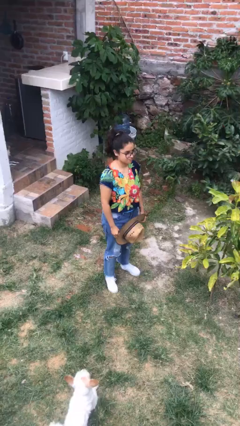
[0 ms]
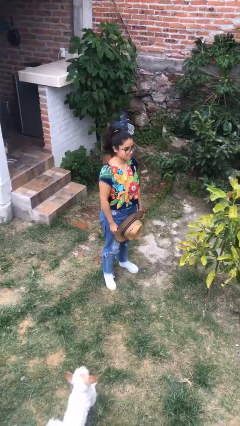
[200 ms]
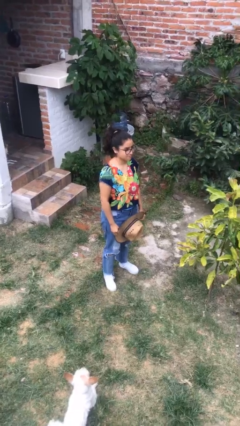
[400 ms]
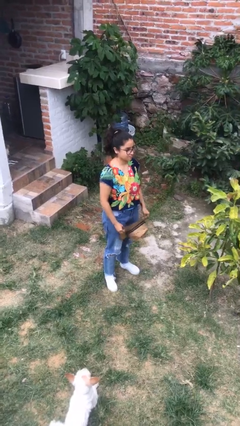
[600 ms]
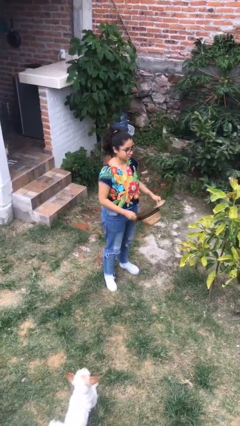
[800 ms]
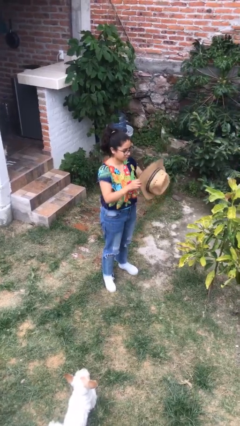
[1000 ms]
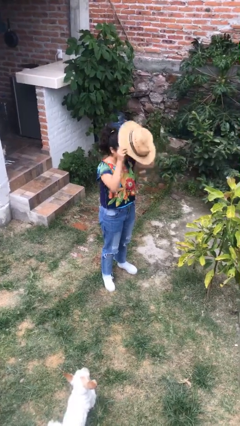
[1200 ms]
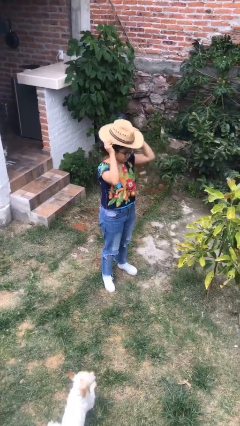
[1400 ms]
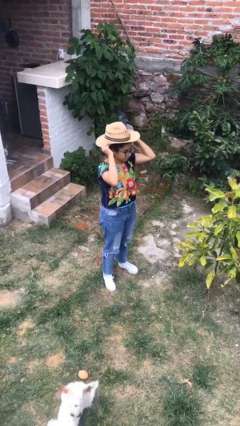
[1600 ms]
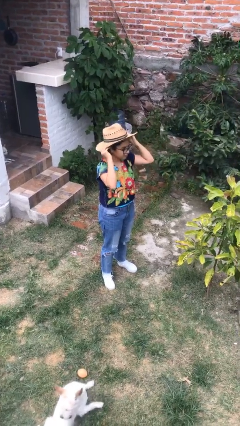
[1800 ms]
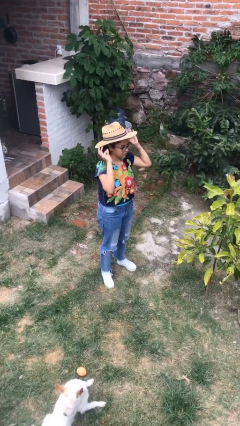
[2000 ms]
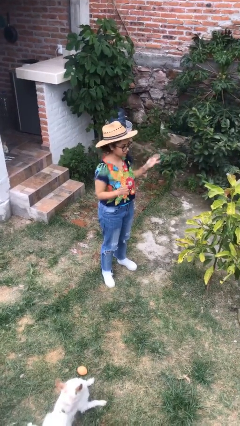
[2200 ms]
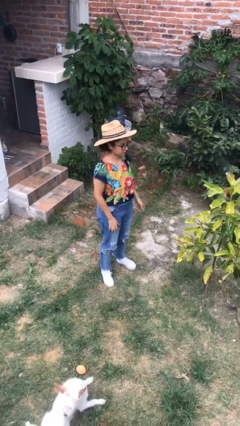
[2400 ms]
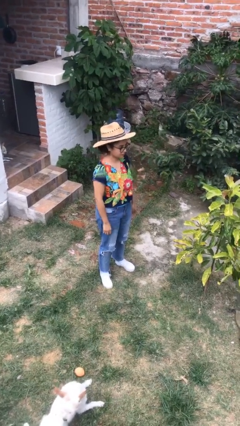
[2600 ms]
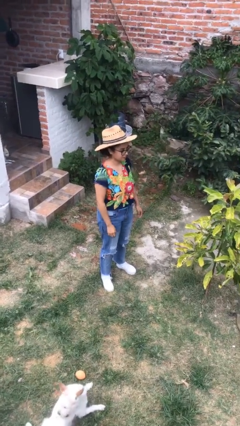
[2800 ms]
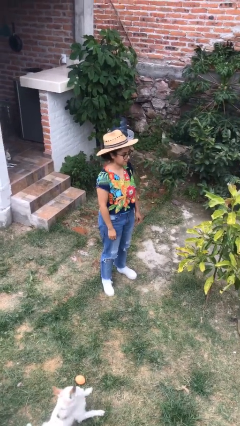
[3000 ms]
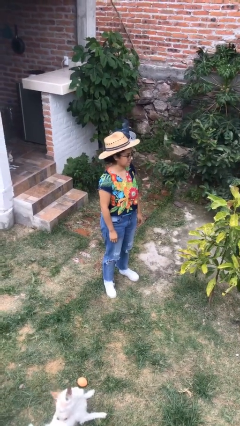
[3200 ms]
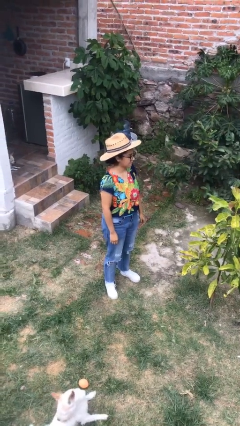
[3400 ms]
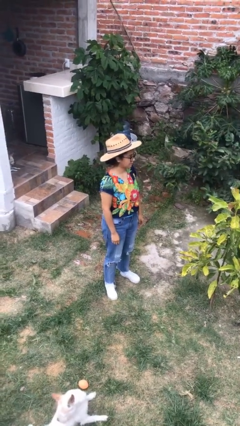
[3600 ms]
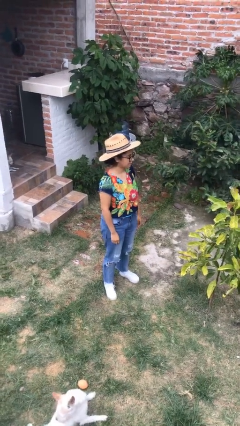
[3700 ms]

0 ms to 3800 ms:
person puts on hat

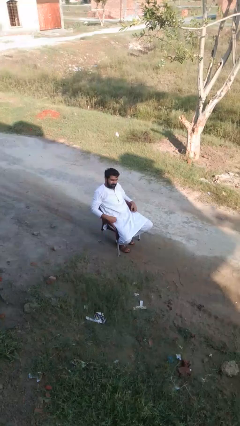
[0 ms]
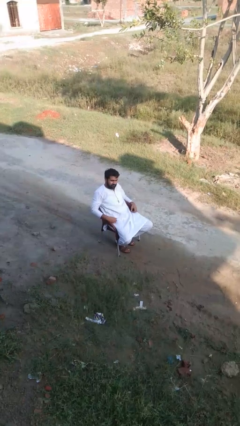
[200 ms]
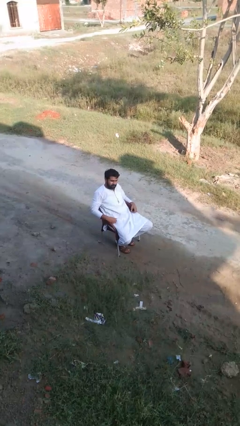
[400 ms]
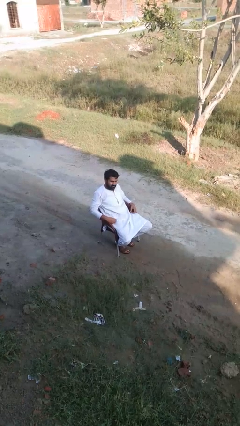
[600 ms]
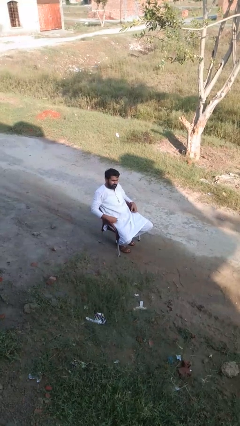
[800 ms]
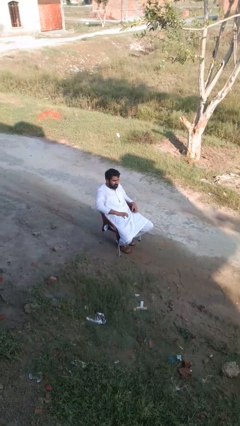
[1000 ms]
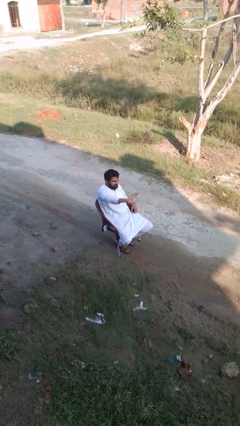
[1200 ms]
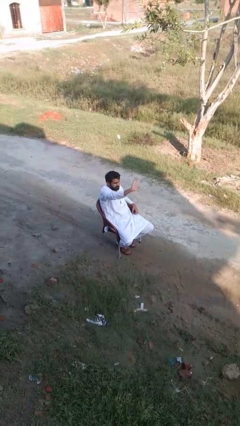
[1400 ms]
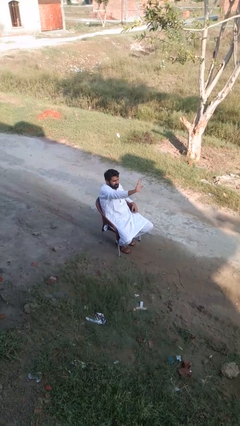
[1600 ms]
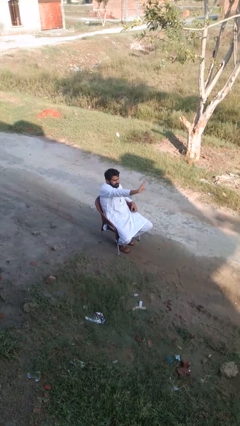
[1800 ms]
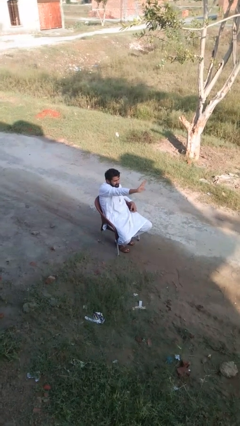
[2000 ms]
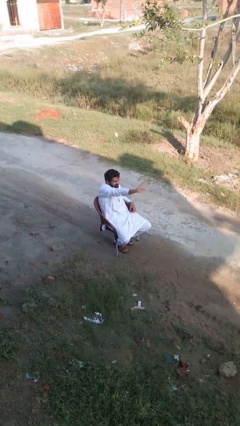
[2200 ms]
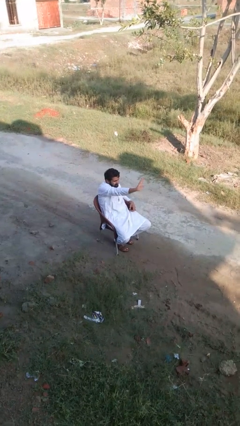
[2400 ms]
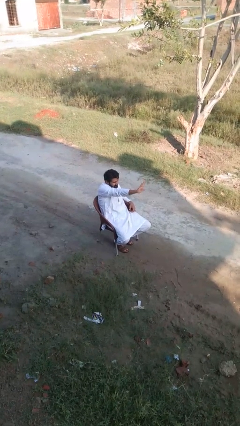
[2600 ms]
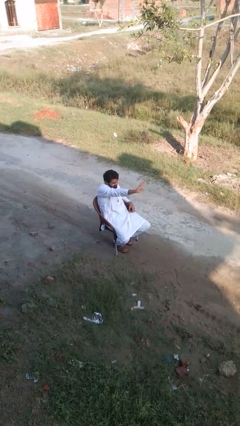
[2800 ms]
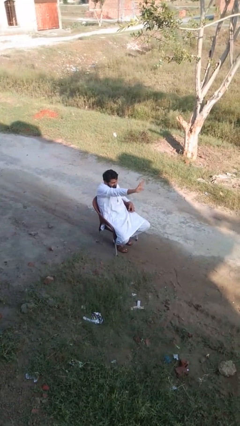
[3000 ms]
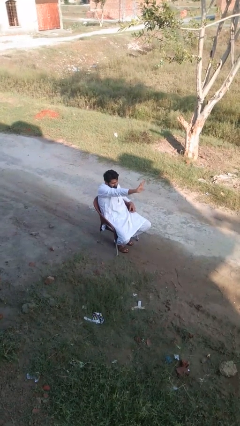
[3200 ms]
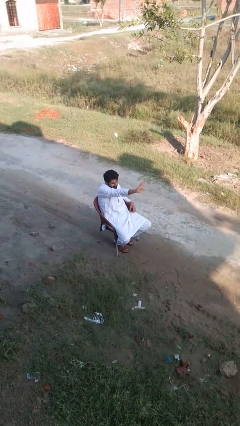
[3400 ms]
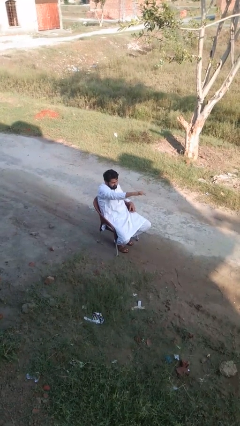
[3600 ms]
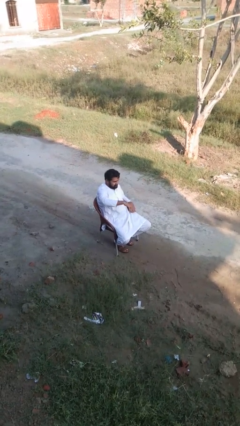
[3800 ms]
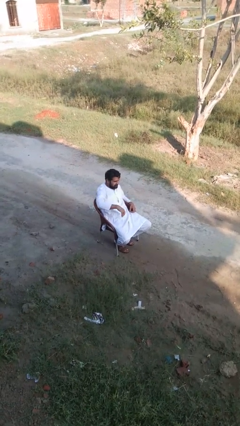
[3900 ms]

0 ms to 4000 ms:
person gestures stop

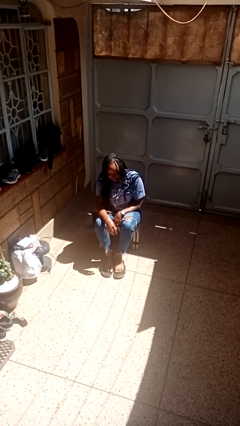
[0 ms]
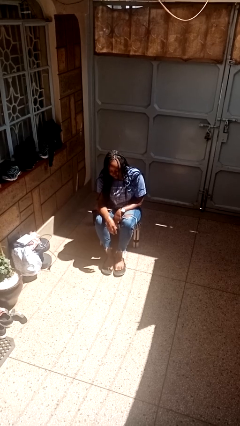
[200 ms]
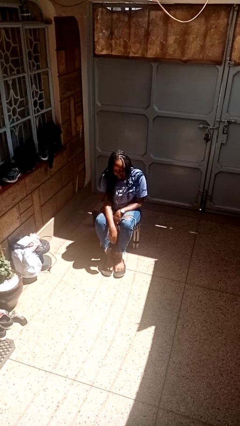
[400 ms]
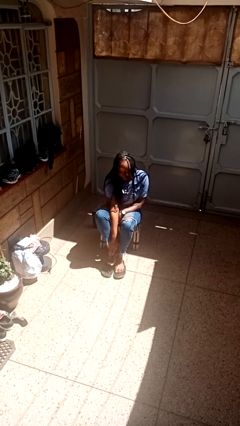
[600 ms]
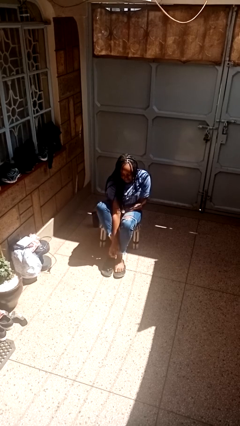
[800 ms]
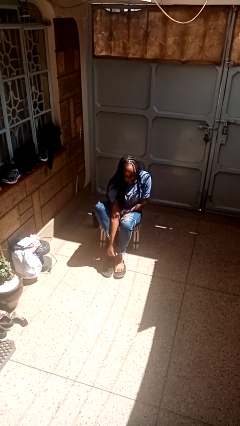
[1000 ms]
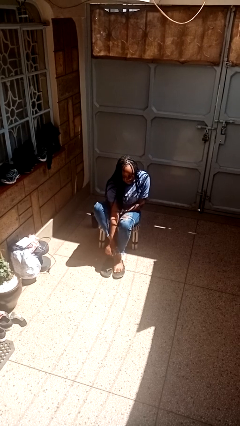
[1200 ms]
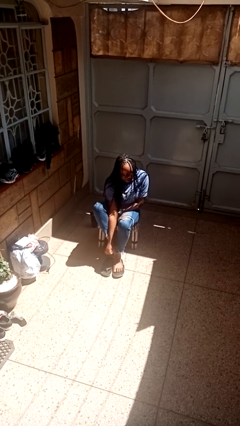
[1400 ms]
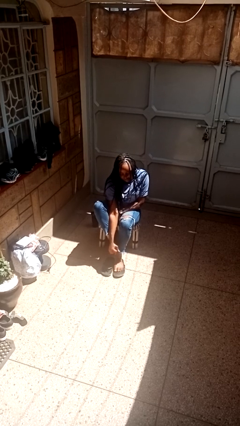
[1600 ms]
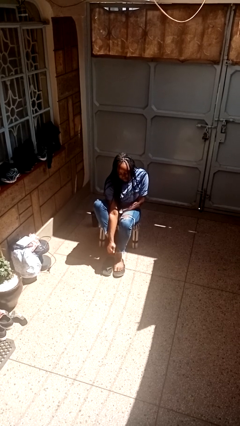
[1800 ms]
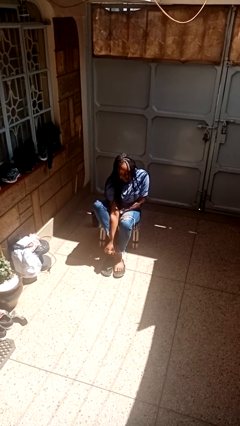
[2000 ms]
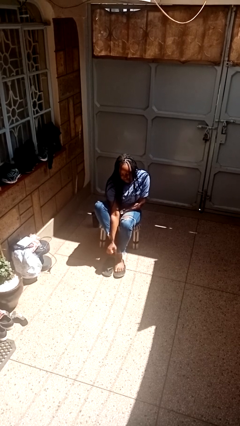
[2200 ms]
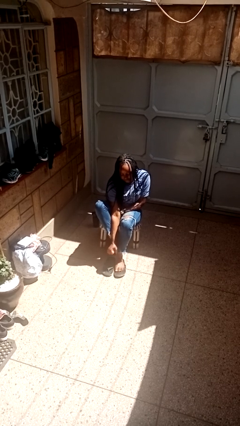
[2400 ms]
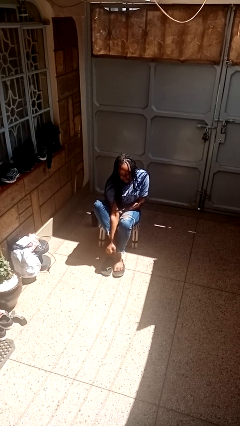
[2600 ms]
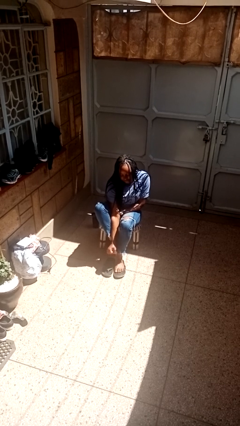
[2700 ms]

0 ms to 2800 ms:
person rubs foot

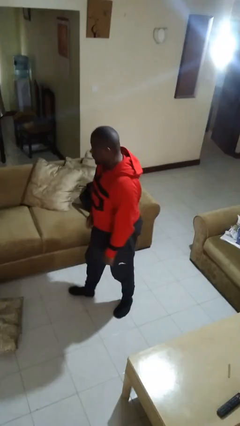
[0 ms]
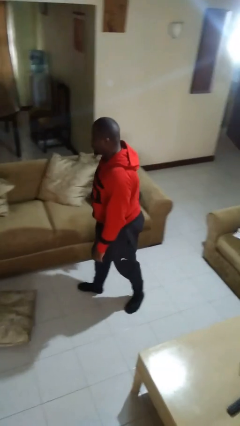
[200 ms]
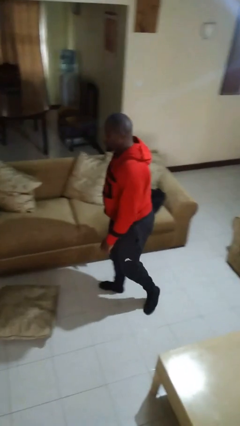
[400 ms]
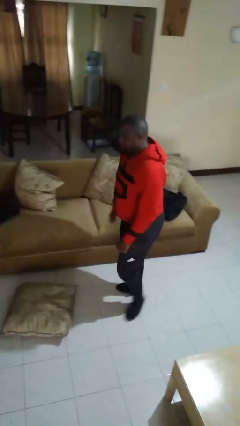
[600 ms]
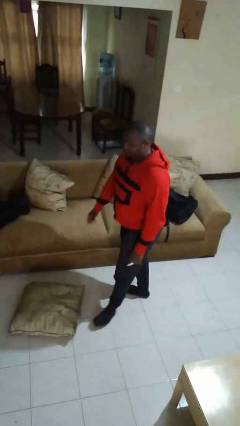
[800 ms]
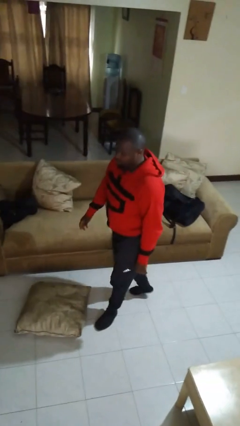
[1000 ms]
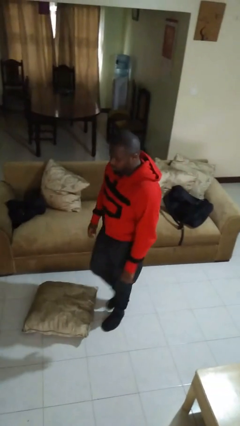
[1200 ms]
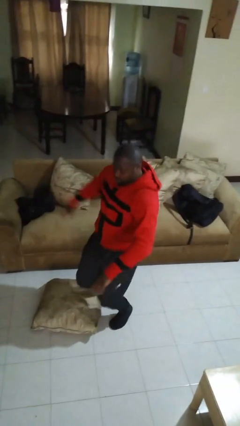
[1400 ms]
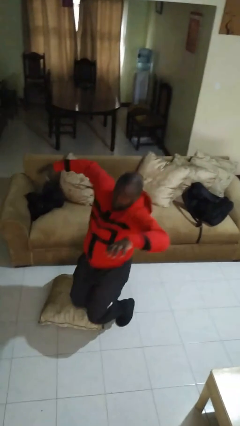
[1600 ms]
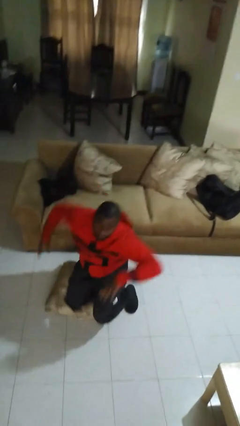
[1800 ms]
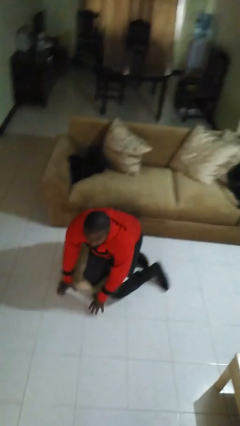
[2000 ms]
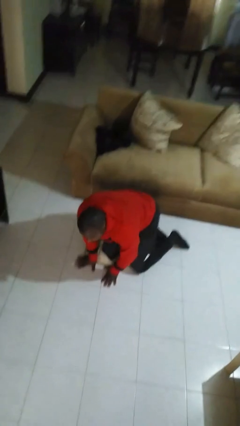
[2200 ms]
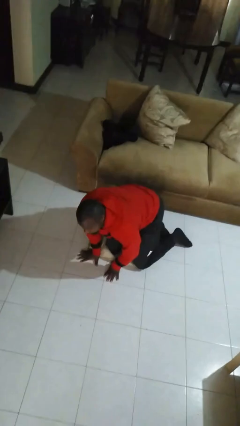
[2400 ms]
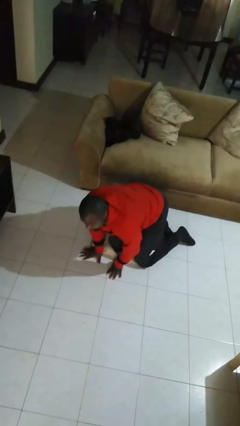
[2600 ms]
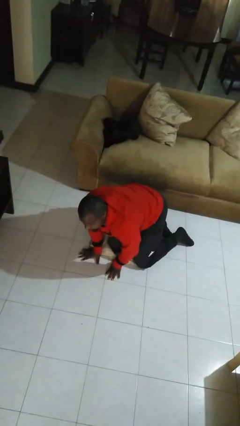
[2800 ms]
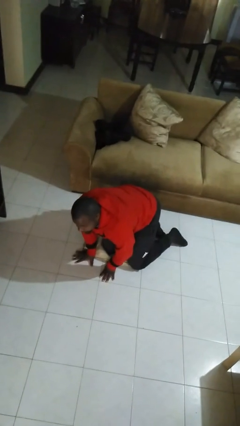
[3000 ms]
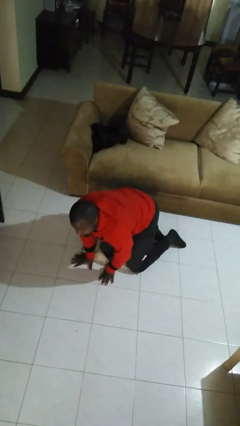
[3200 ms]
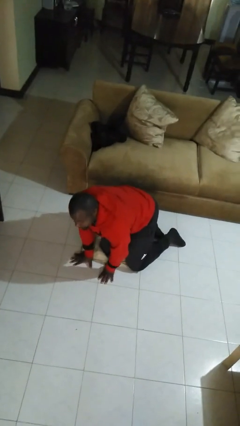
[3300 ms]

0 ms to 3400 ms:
person trips on object on floor

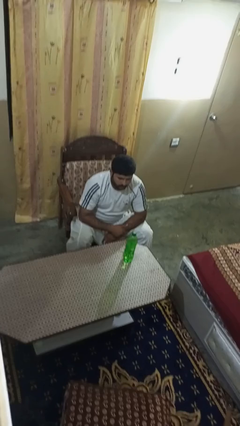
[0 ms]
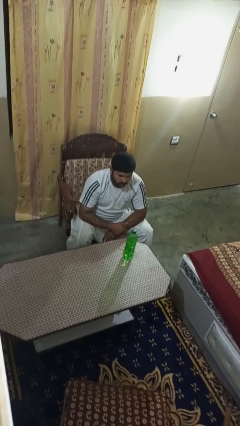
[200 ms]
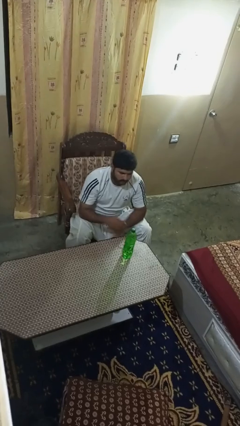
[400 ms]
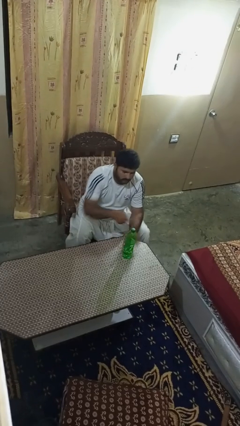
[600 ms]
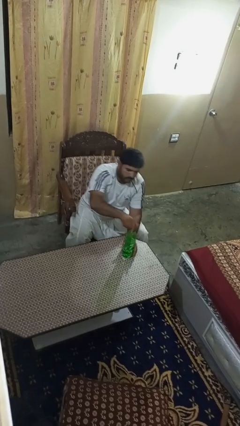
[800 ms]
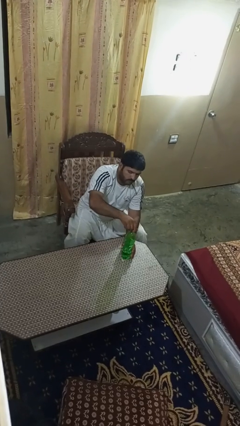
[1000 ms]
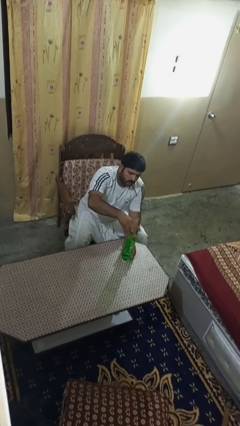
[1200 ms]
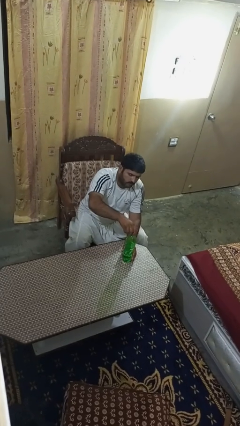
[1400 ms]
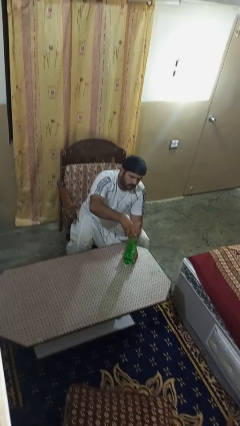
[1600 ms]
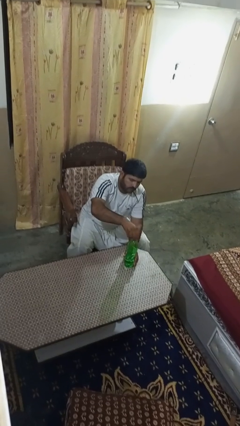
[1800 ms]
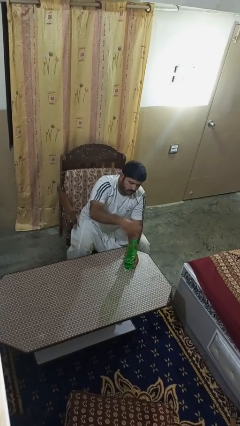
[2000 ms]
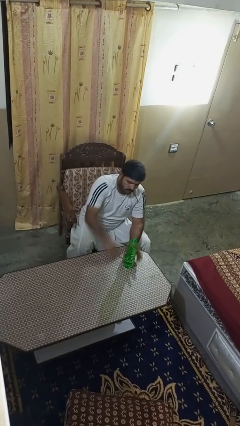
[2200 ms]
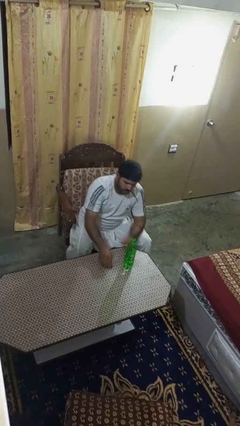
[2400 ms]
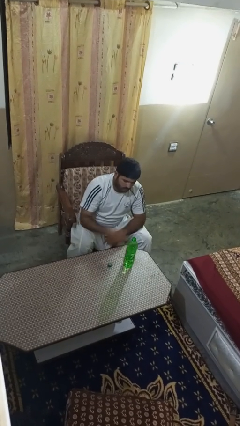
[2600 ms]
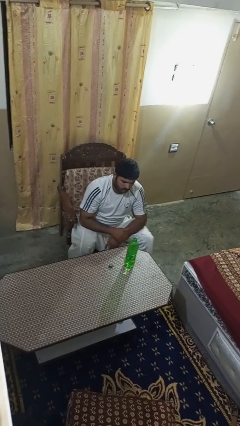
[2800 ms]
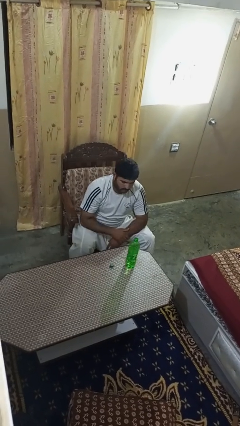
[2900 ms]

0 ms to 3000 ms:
person unscrews lid from bottle

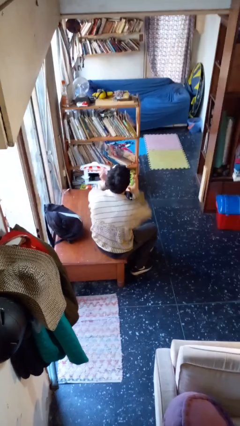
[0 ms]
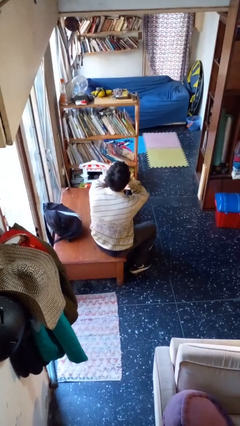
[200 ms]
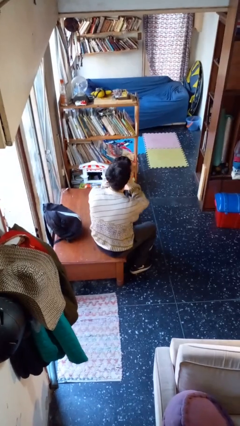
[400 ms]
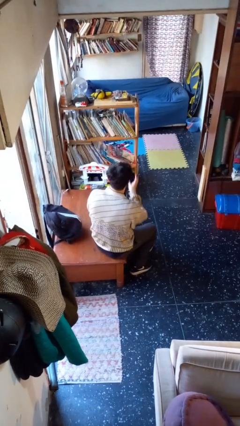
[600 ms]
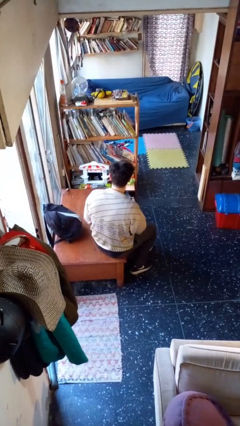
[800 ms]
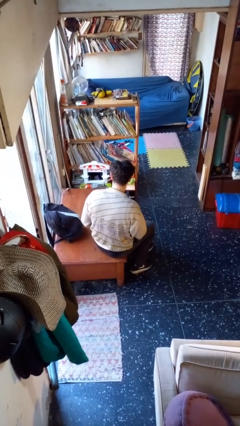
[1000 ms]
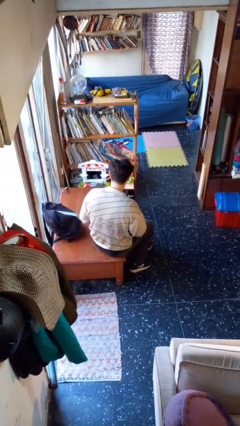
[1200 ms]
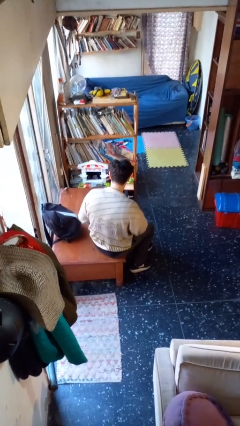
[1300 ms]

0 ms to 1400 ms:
person takes off facemask
